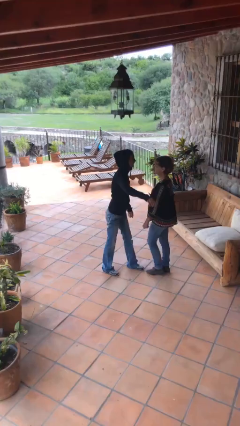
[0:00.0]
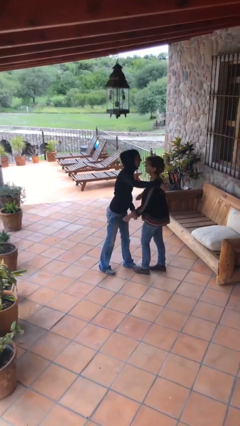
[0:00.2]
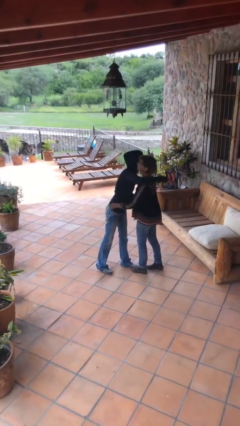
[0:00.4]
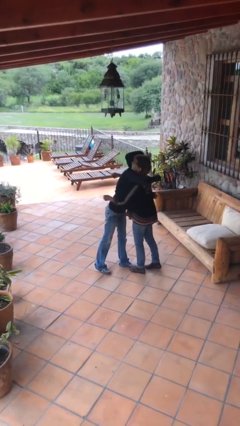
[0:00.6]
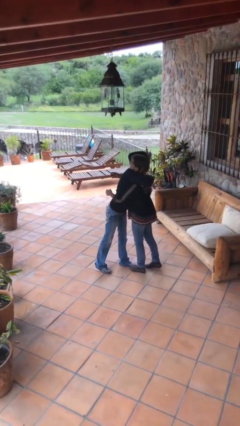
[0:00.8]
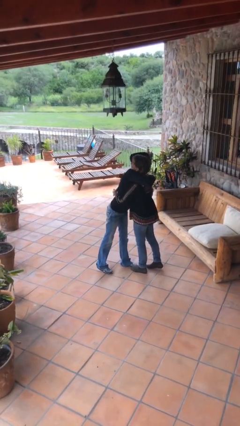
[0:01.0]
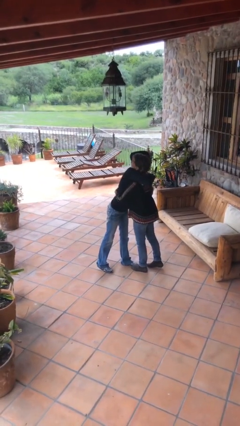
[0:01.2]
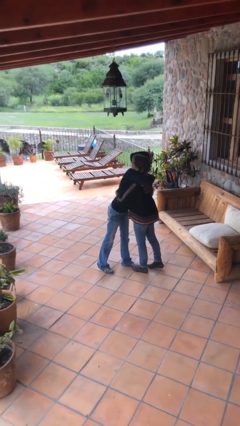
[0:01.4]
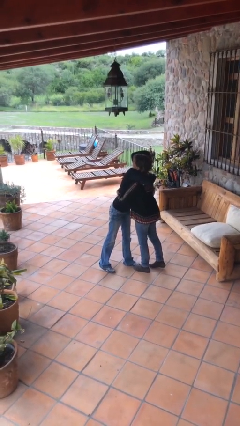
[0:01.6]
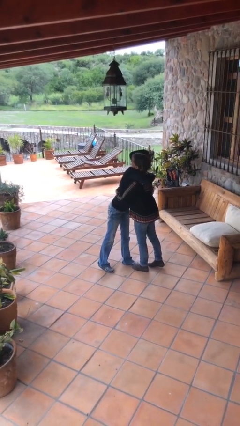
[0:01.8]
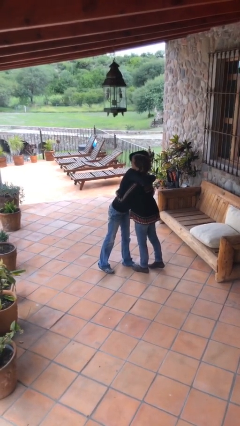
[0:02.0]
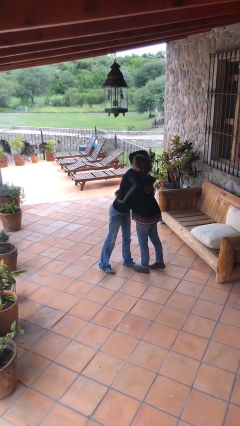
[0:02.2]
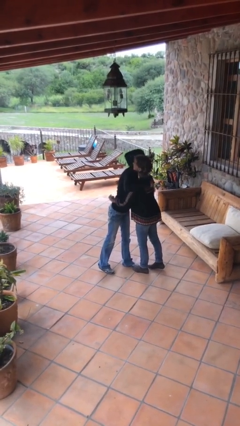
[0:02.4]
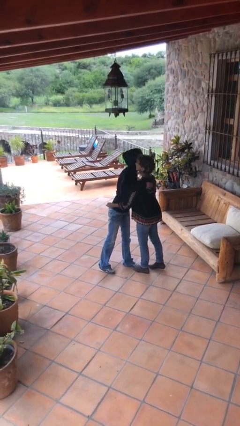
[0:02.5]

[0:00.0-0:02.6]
person embraces person

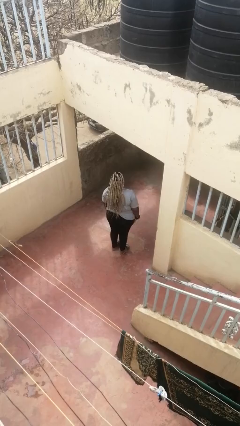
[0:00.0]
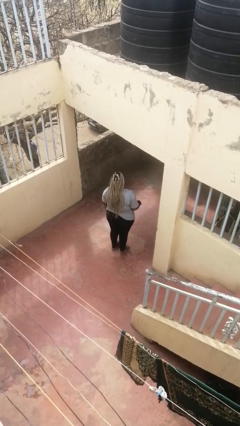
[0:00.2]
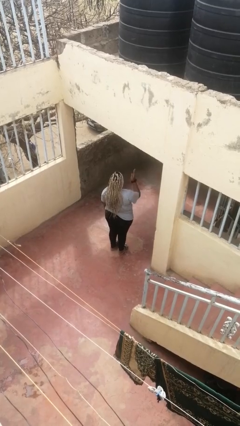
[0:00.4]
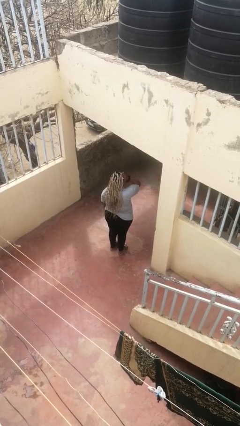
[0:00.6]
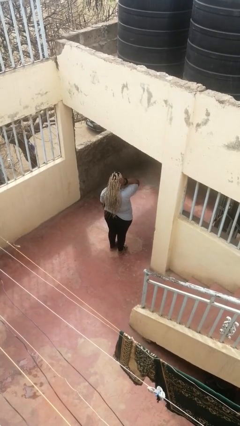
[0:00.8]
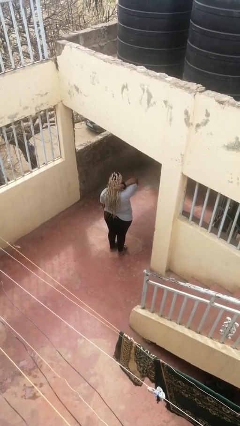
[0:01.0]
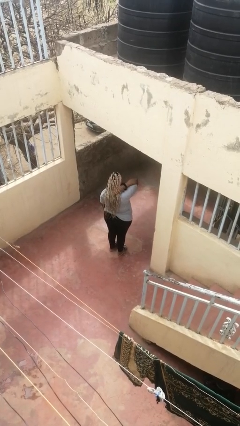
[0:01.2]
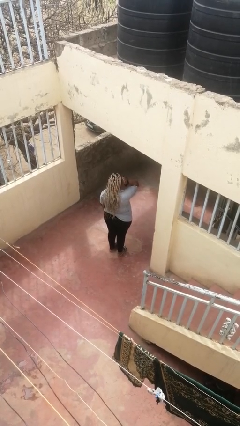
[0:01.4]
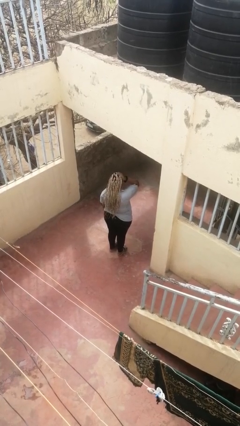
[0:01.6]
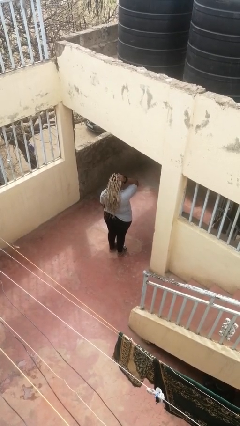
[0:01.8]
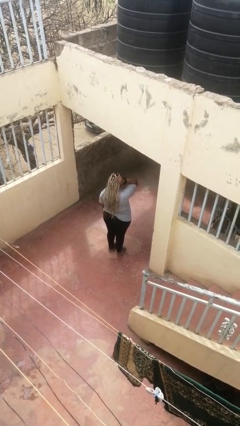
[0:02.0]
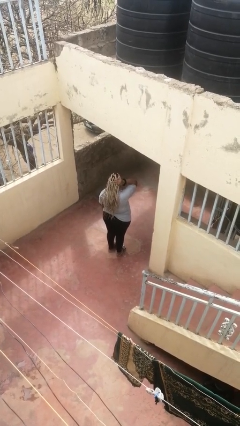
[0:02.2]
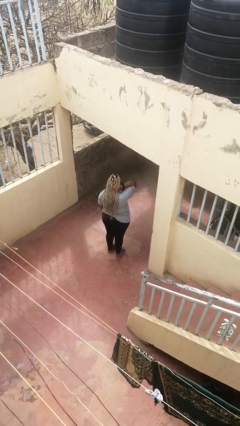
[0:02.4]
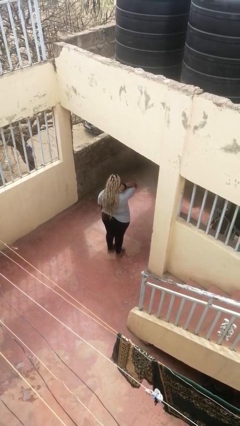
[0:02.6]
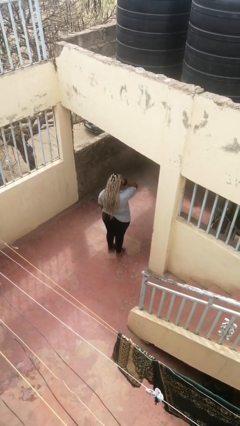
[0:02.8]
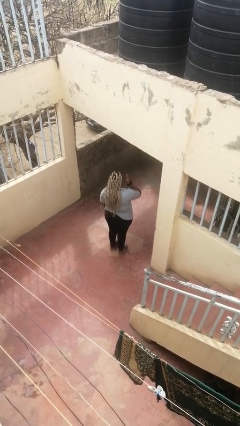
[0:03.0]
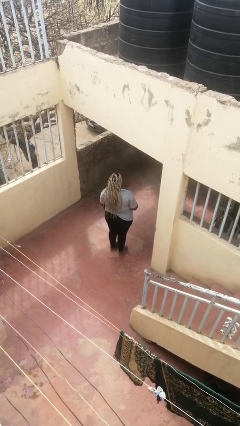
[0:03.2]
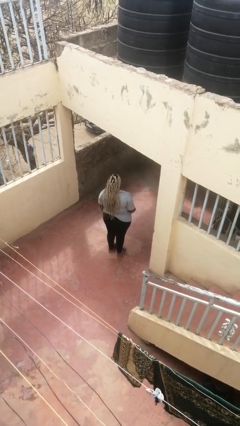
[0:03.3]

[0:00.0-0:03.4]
person strokes hair

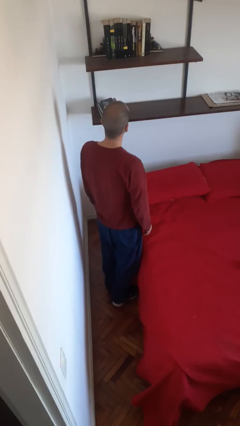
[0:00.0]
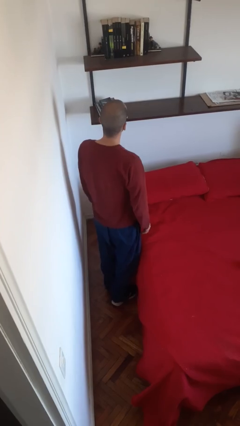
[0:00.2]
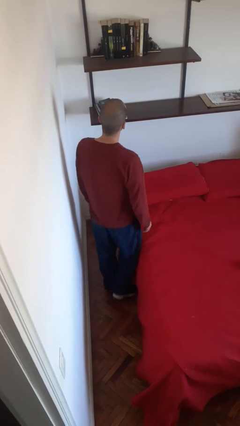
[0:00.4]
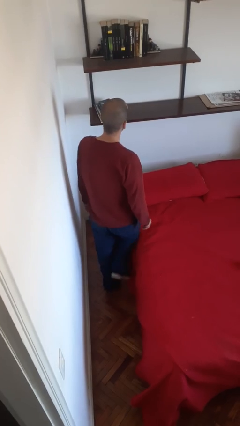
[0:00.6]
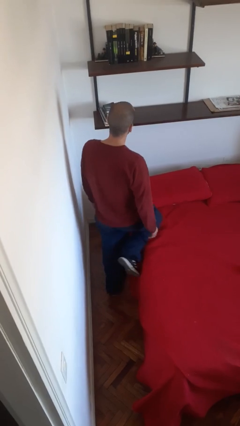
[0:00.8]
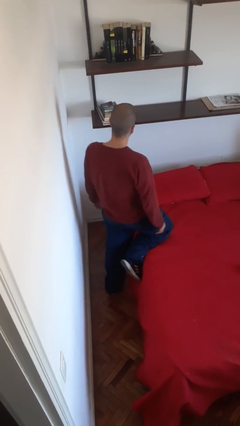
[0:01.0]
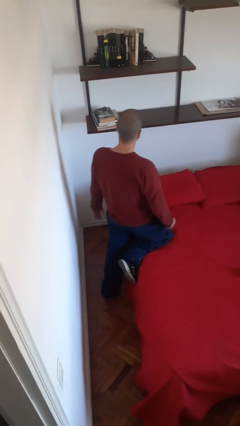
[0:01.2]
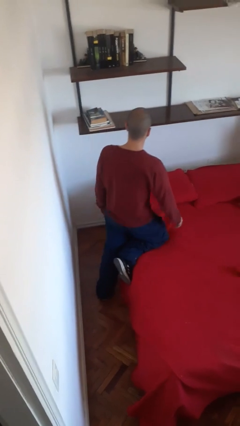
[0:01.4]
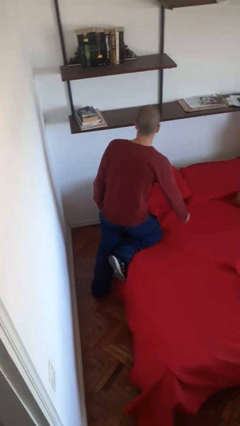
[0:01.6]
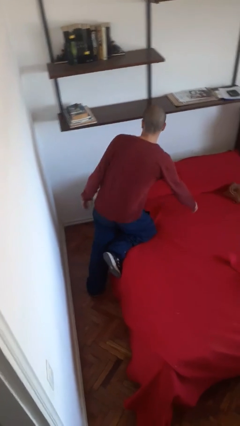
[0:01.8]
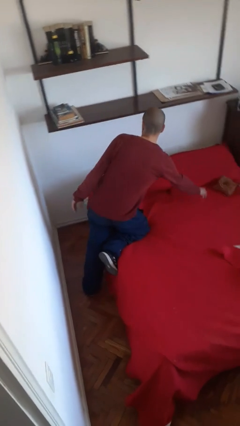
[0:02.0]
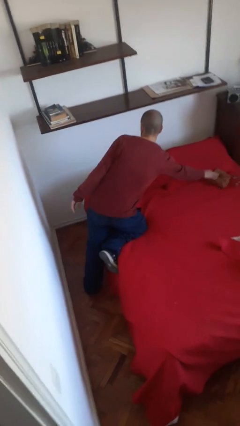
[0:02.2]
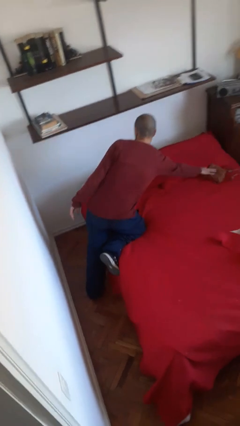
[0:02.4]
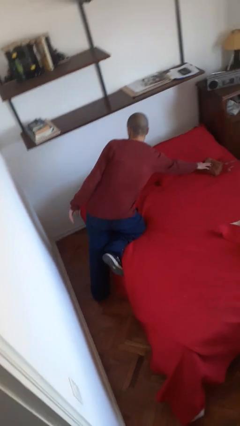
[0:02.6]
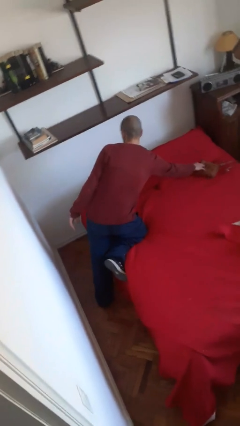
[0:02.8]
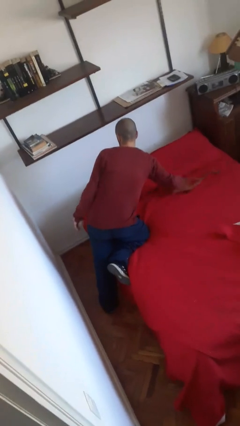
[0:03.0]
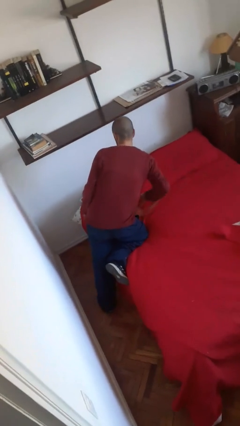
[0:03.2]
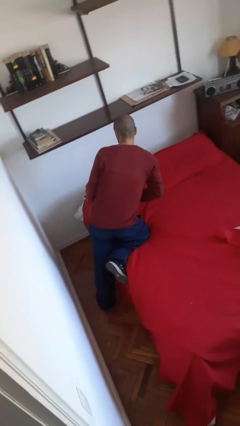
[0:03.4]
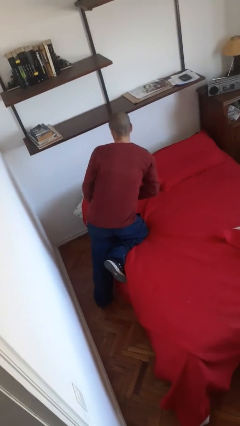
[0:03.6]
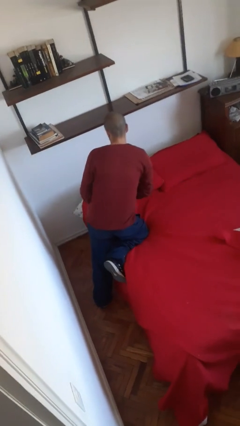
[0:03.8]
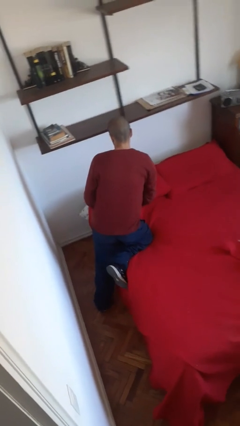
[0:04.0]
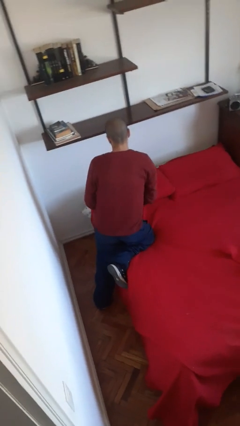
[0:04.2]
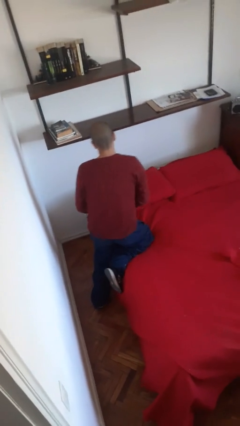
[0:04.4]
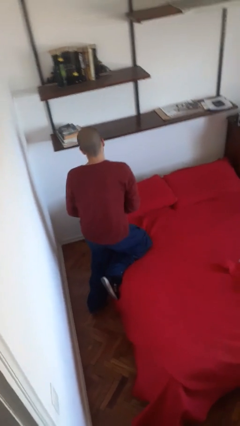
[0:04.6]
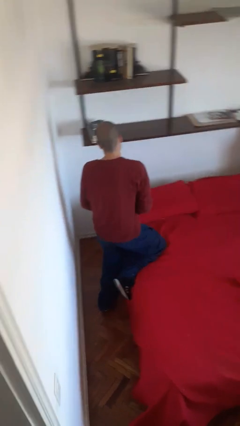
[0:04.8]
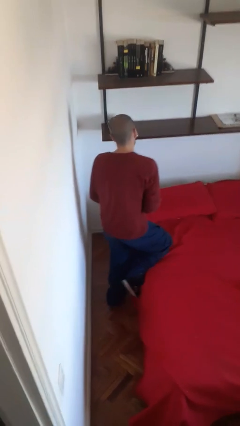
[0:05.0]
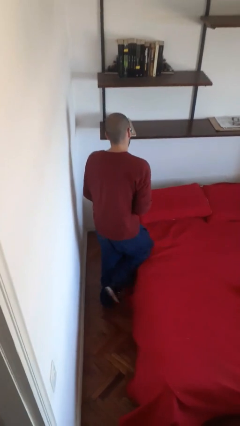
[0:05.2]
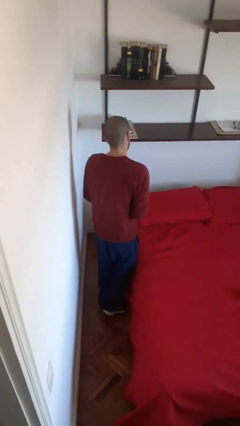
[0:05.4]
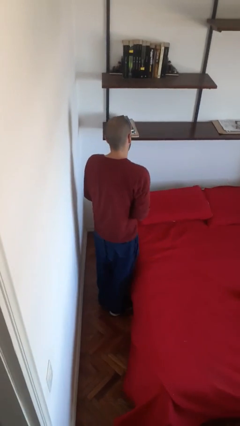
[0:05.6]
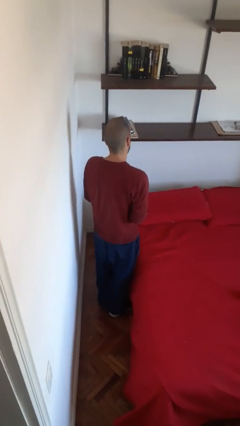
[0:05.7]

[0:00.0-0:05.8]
person picks up object from bed

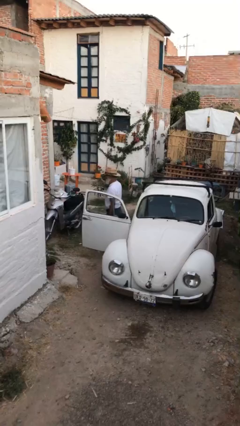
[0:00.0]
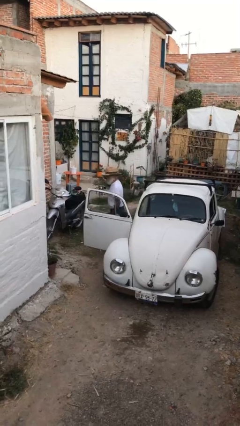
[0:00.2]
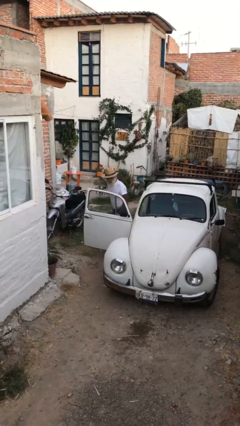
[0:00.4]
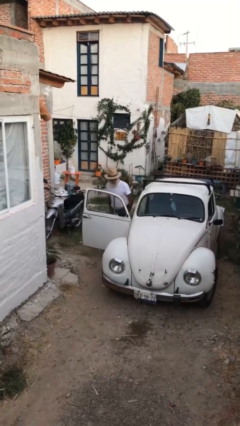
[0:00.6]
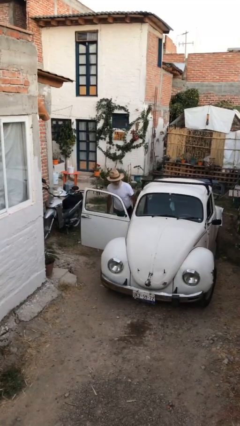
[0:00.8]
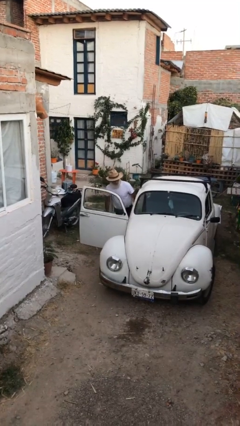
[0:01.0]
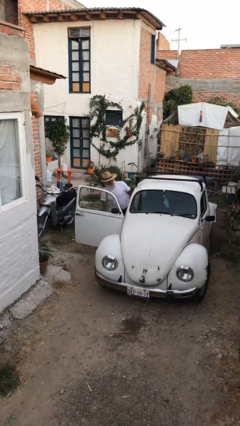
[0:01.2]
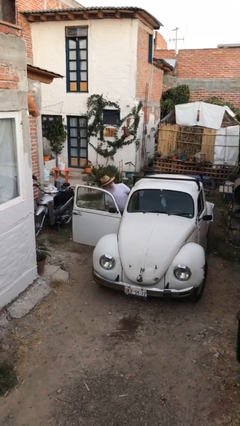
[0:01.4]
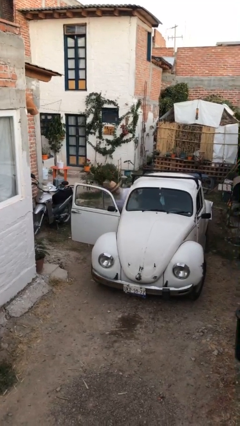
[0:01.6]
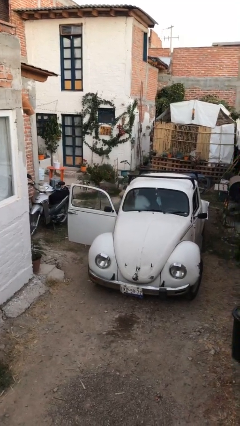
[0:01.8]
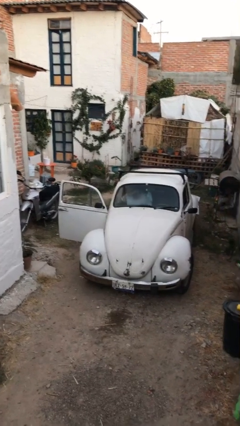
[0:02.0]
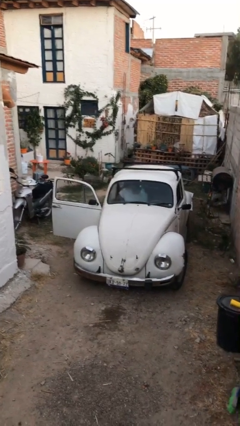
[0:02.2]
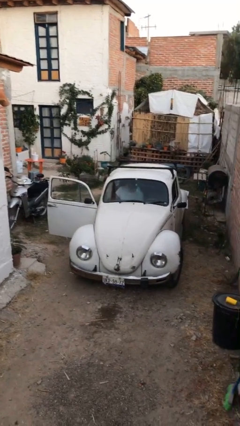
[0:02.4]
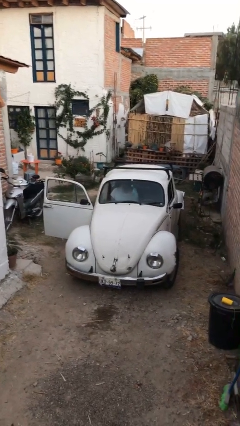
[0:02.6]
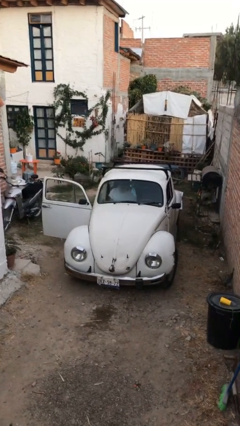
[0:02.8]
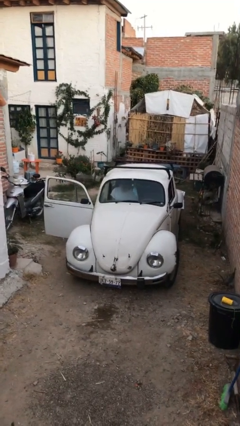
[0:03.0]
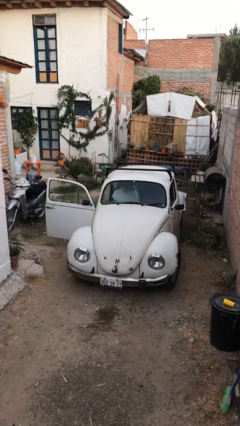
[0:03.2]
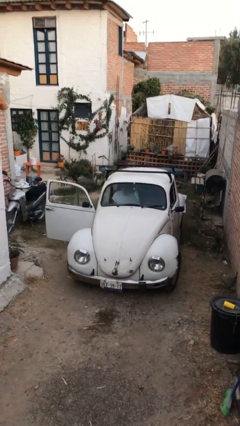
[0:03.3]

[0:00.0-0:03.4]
person enters car

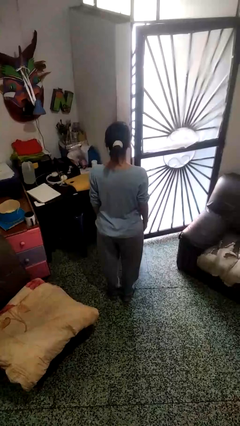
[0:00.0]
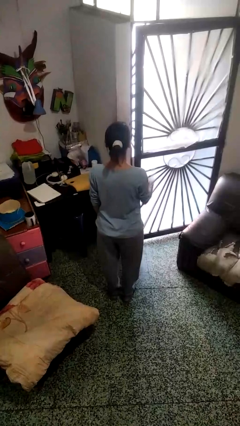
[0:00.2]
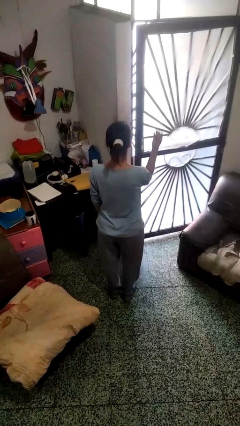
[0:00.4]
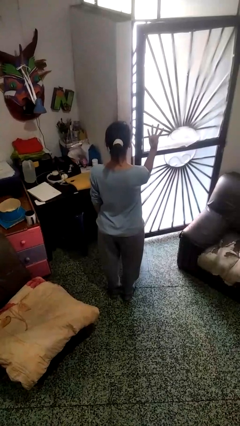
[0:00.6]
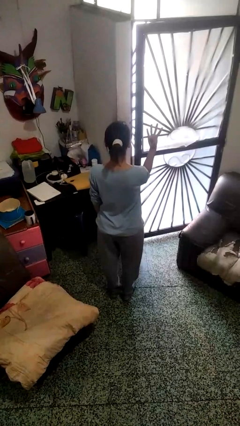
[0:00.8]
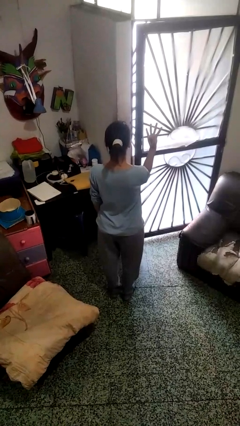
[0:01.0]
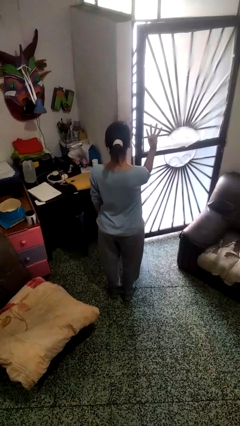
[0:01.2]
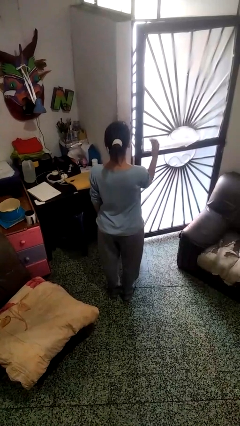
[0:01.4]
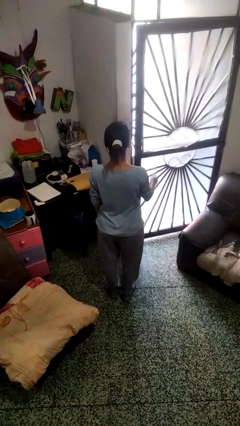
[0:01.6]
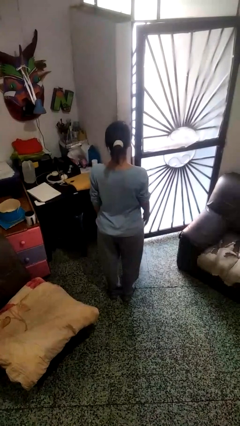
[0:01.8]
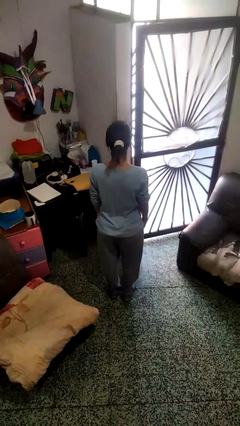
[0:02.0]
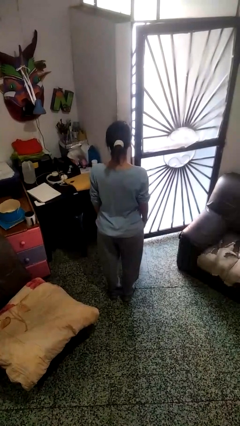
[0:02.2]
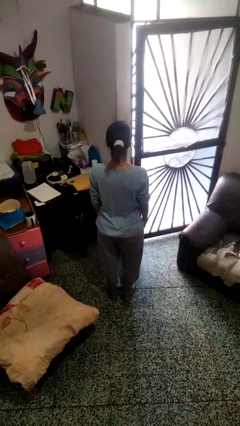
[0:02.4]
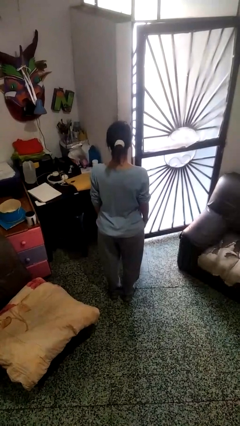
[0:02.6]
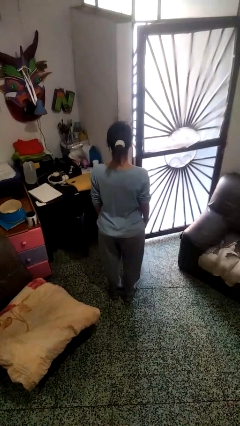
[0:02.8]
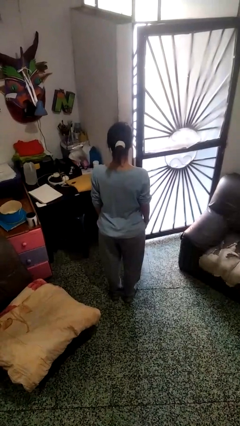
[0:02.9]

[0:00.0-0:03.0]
person gestures number four
